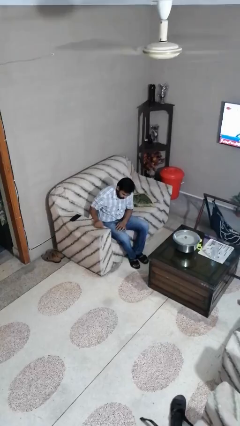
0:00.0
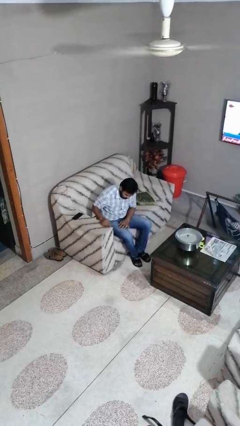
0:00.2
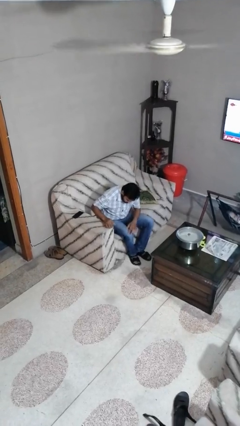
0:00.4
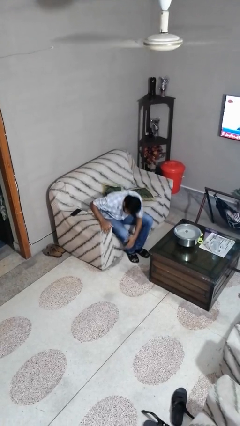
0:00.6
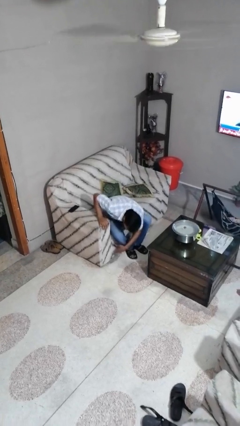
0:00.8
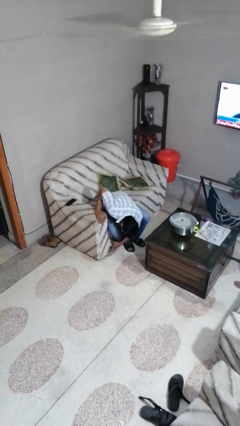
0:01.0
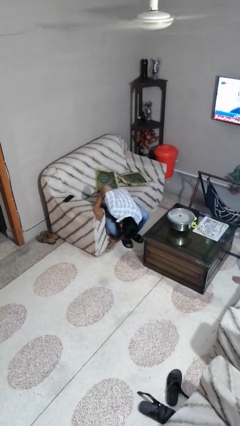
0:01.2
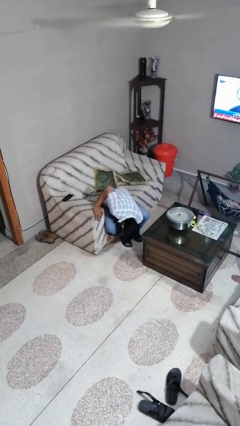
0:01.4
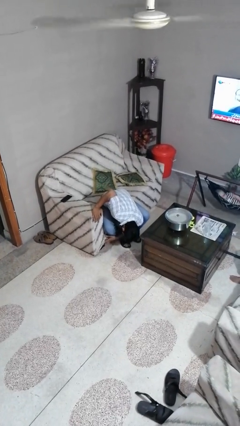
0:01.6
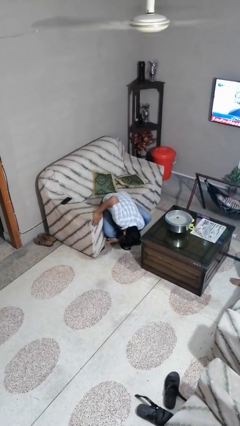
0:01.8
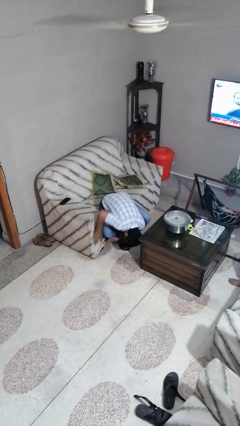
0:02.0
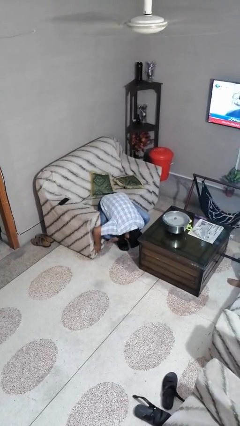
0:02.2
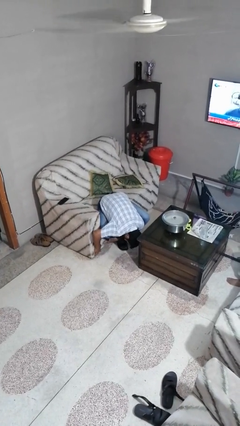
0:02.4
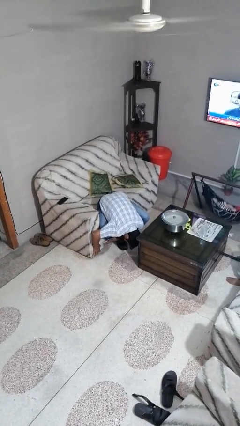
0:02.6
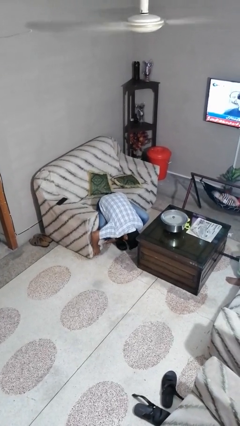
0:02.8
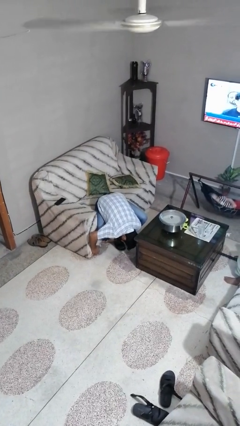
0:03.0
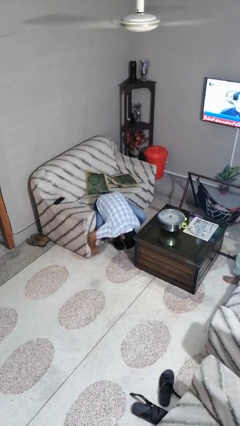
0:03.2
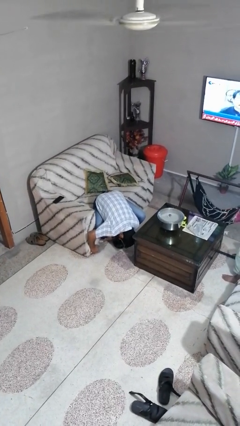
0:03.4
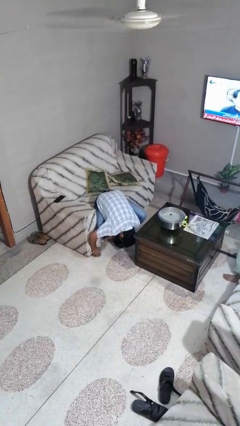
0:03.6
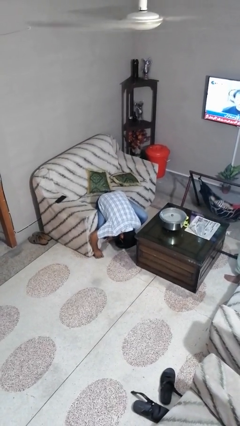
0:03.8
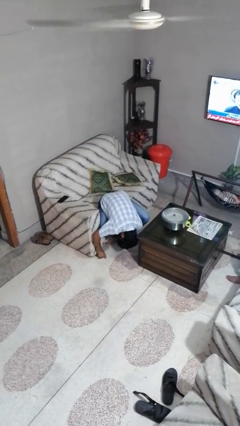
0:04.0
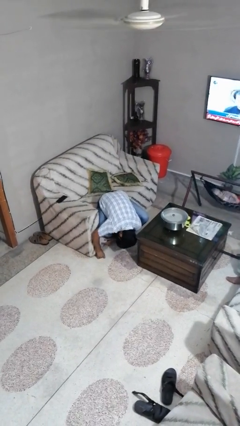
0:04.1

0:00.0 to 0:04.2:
person searches under couch

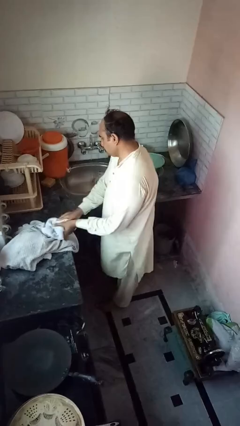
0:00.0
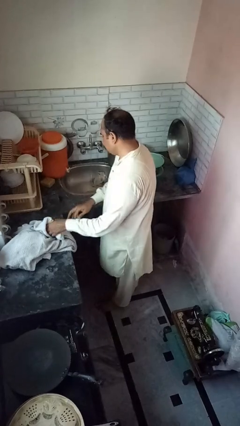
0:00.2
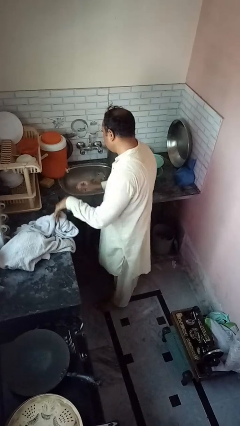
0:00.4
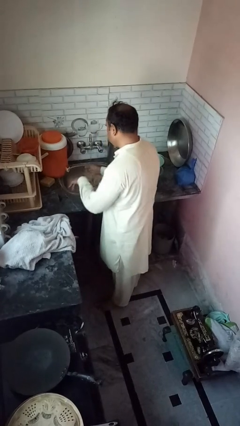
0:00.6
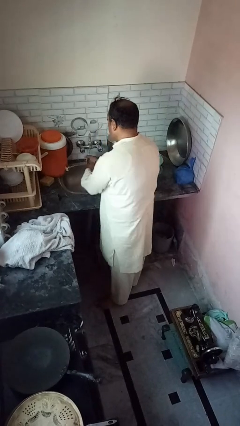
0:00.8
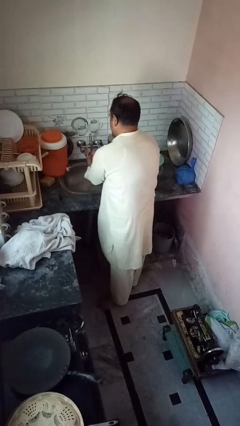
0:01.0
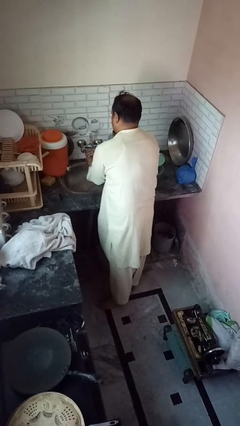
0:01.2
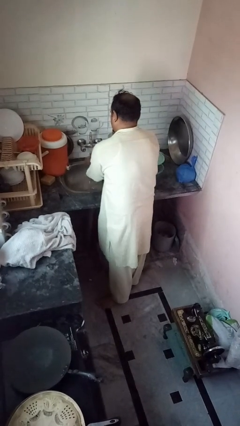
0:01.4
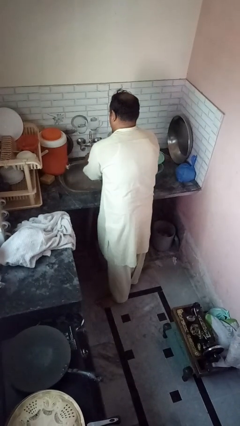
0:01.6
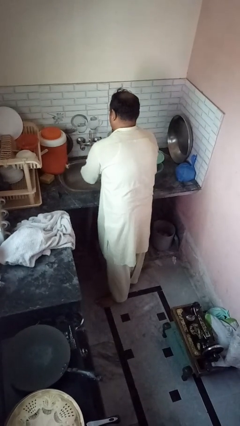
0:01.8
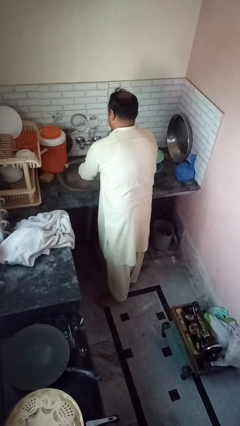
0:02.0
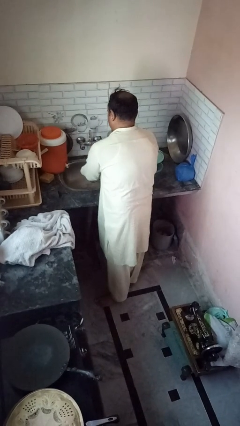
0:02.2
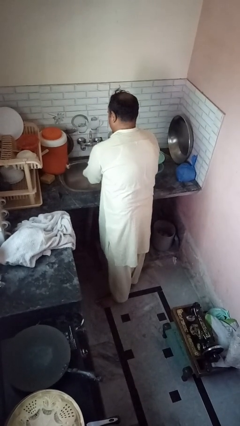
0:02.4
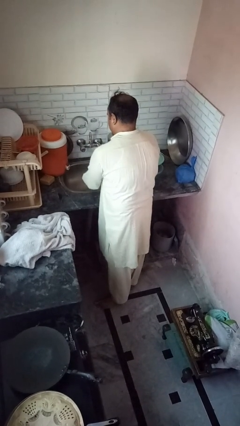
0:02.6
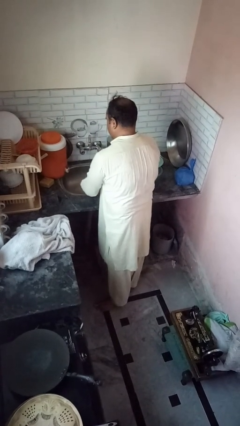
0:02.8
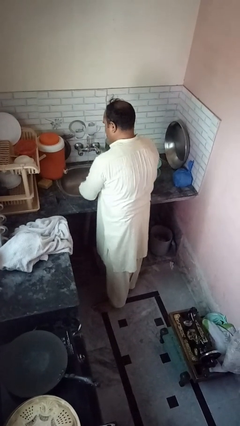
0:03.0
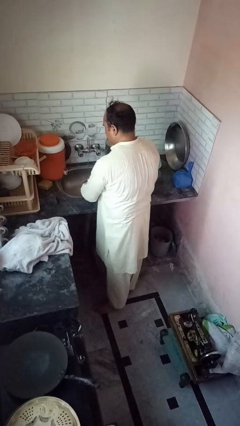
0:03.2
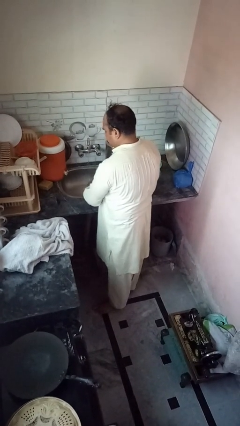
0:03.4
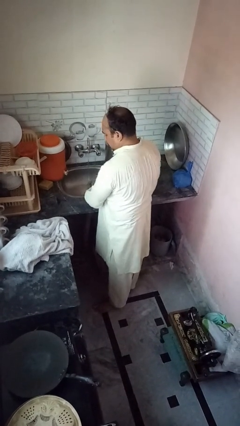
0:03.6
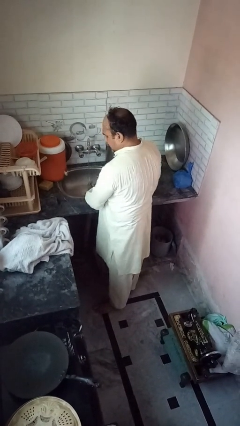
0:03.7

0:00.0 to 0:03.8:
person washes hands

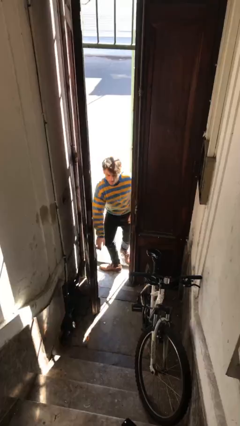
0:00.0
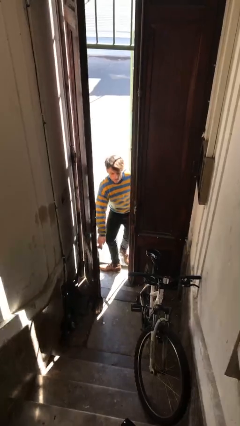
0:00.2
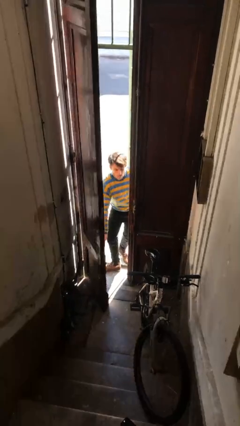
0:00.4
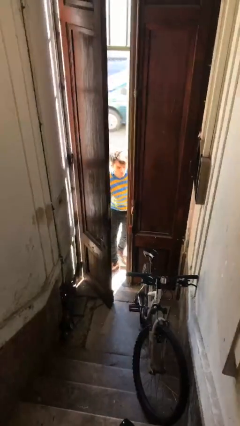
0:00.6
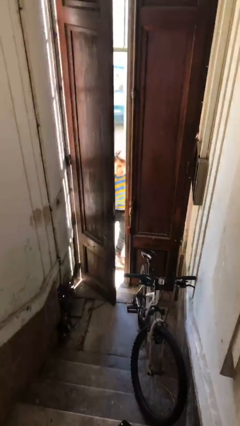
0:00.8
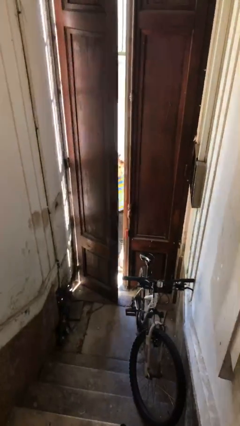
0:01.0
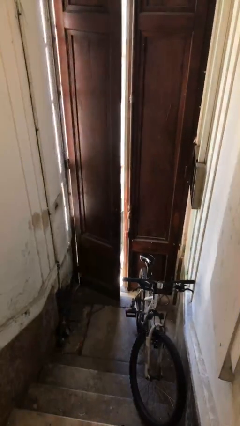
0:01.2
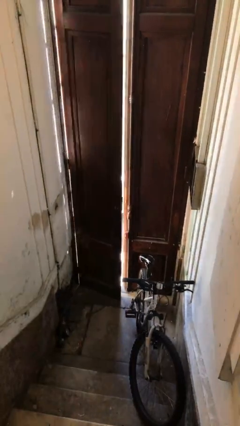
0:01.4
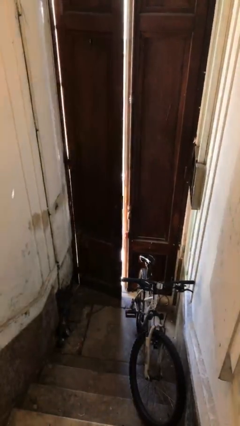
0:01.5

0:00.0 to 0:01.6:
person closes facility door

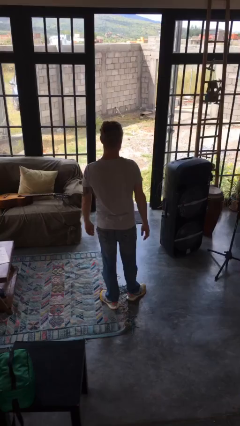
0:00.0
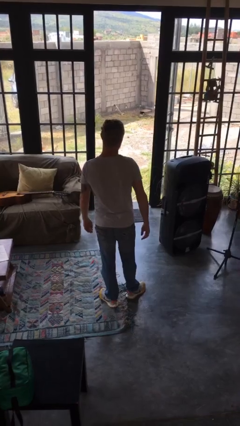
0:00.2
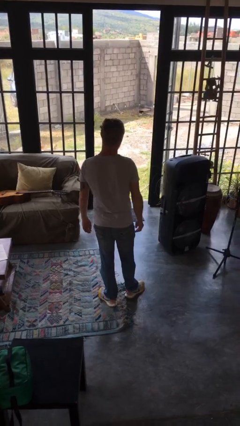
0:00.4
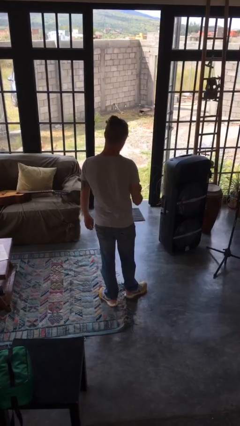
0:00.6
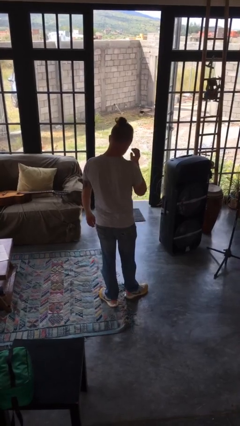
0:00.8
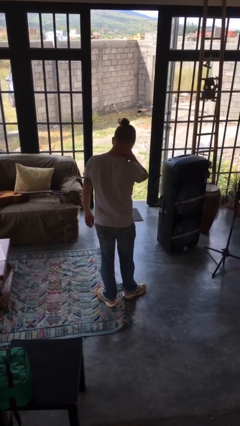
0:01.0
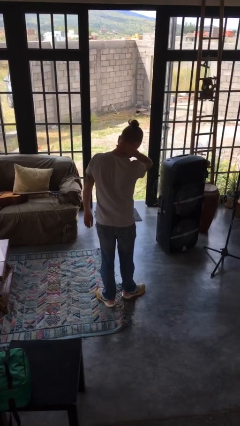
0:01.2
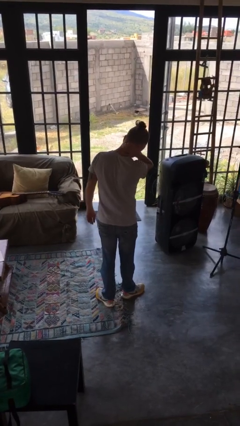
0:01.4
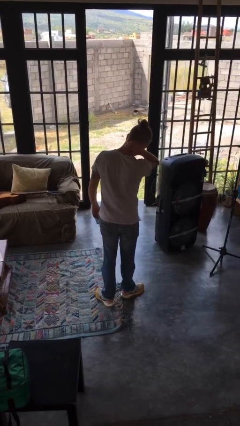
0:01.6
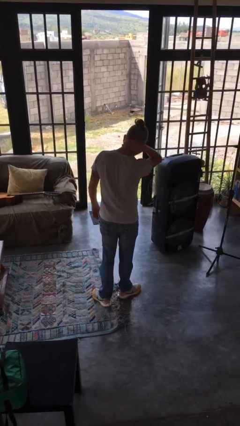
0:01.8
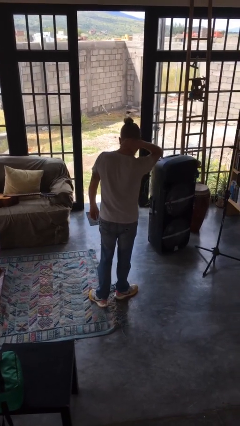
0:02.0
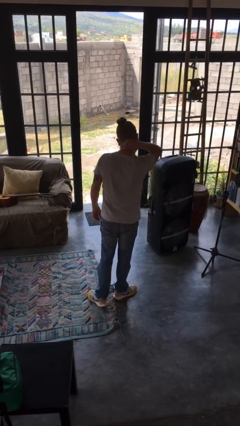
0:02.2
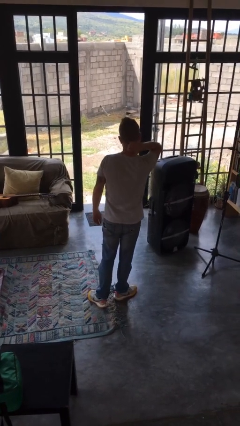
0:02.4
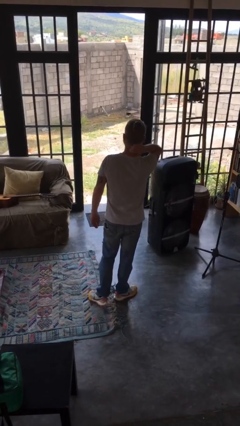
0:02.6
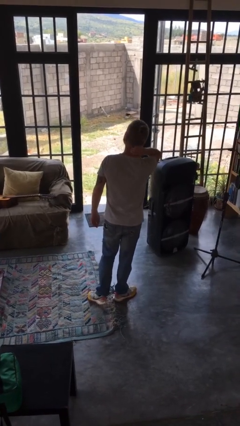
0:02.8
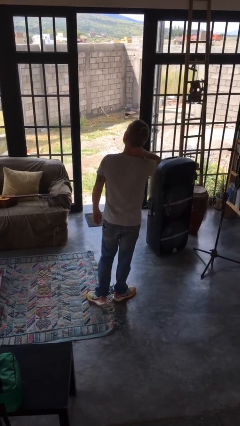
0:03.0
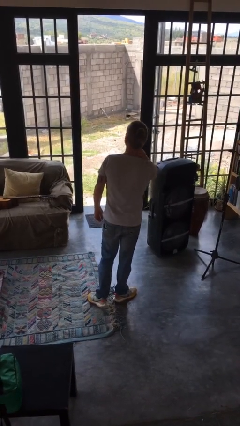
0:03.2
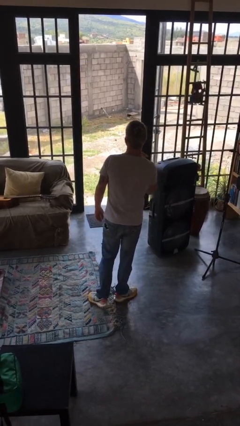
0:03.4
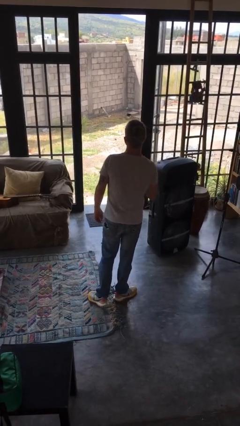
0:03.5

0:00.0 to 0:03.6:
person rubs neck

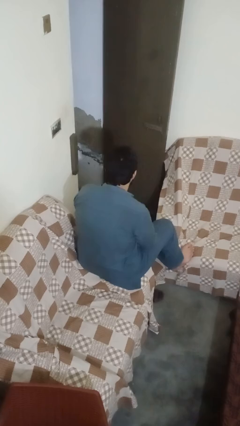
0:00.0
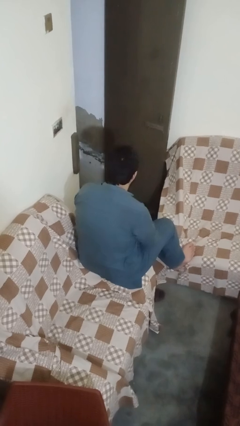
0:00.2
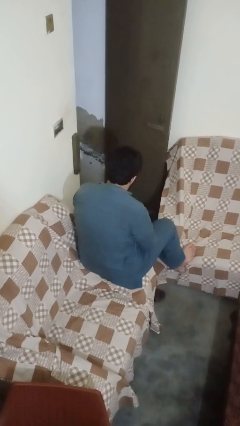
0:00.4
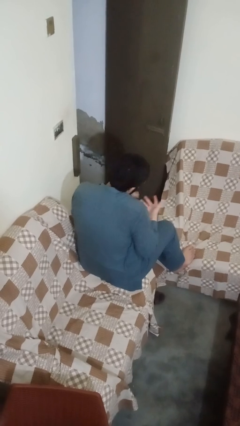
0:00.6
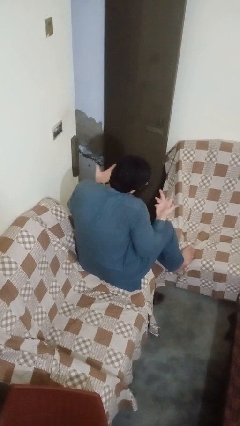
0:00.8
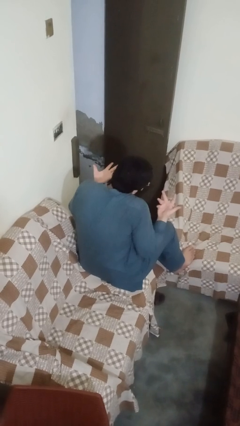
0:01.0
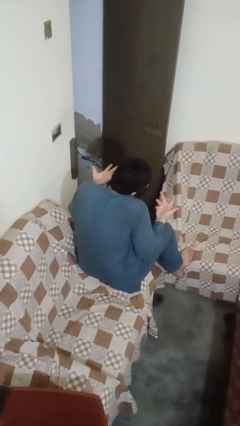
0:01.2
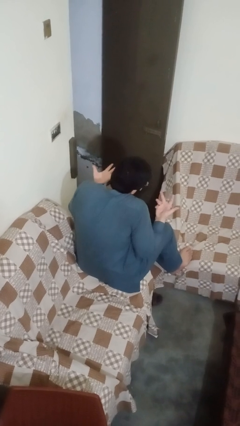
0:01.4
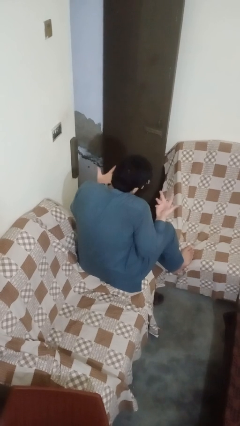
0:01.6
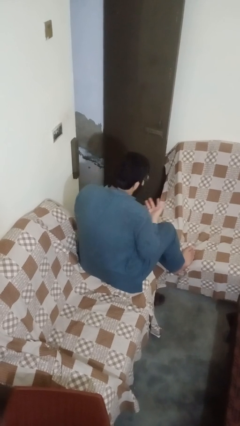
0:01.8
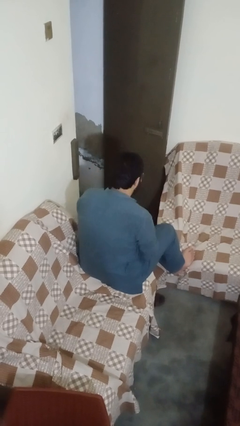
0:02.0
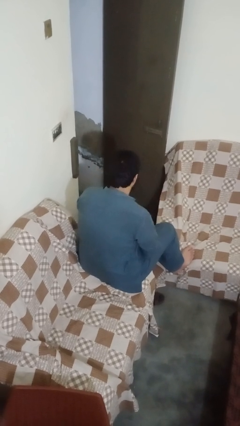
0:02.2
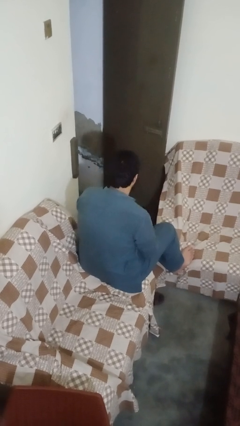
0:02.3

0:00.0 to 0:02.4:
person shrugs

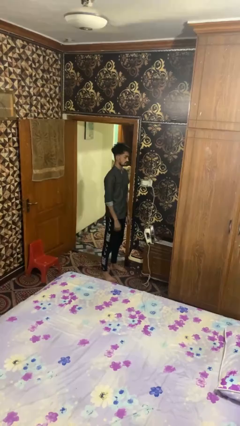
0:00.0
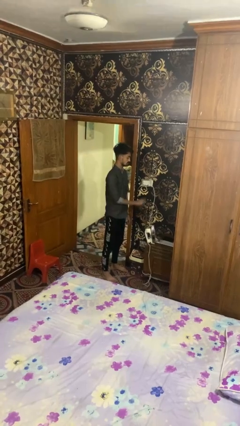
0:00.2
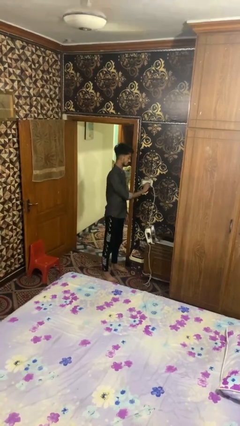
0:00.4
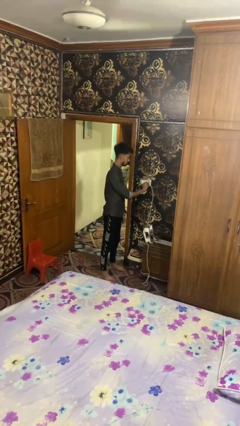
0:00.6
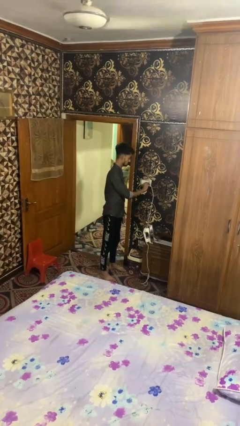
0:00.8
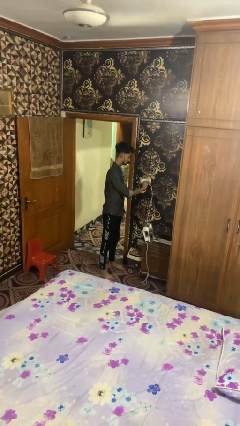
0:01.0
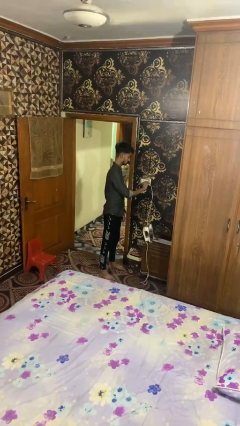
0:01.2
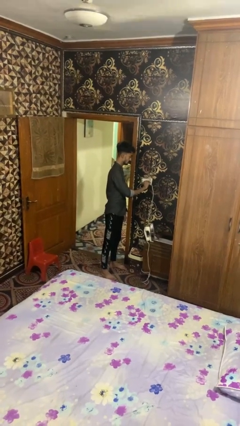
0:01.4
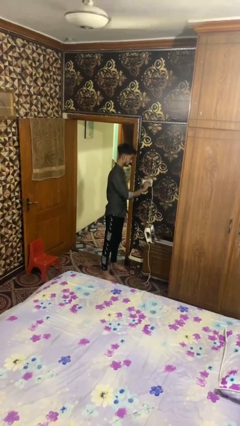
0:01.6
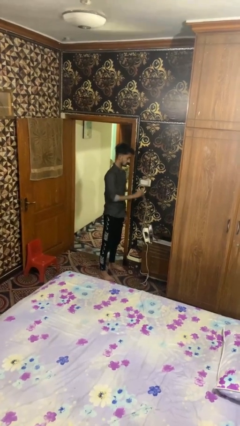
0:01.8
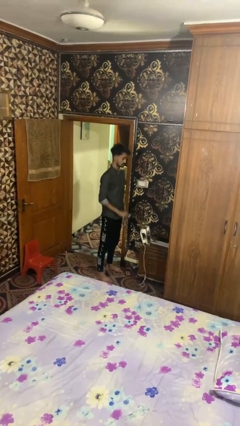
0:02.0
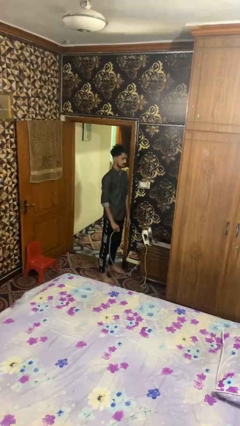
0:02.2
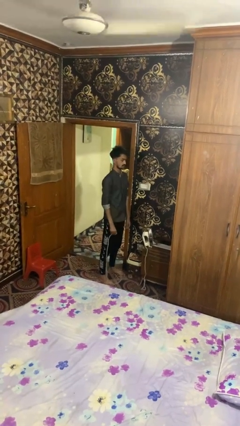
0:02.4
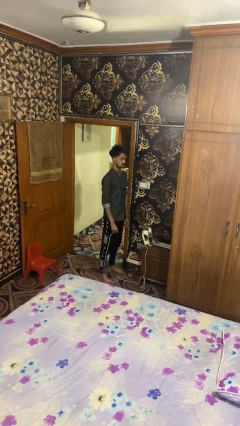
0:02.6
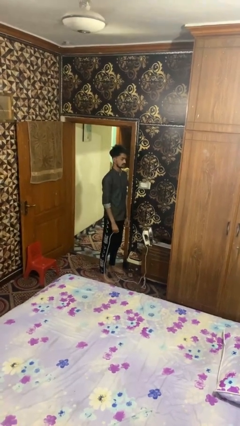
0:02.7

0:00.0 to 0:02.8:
person unplugs from electrical socket
